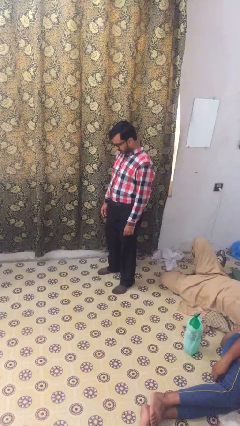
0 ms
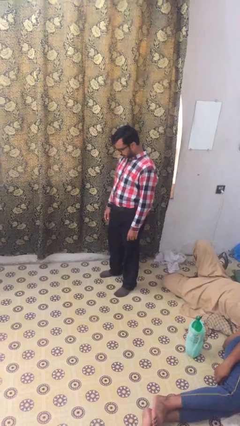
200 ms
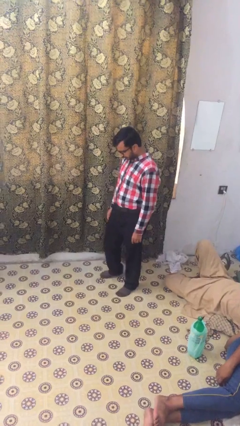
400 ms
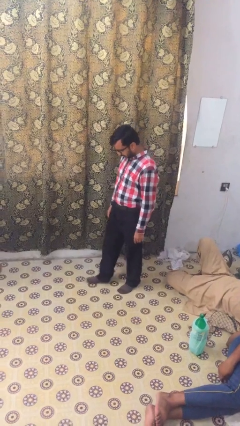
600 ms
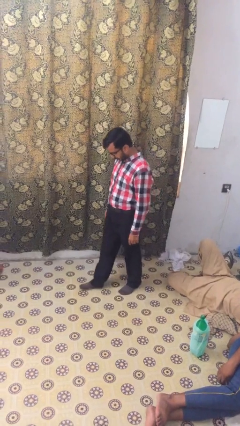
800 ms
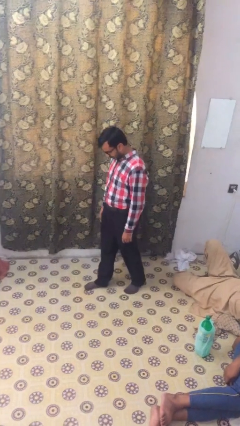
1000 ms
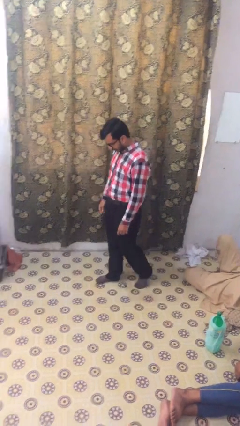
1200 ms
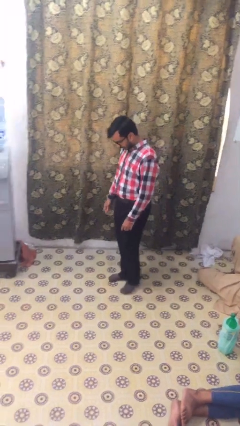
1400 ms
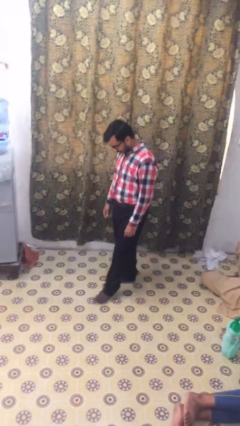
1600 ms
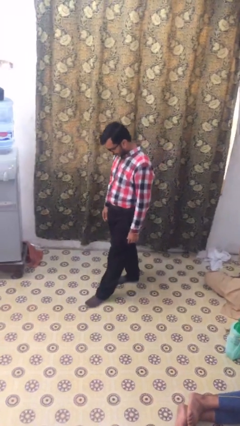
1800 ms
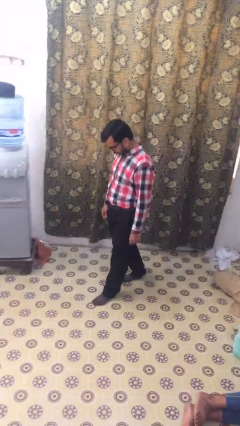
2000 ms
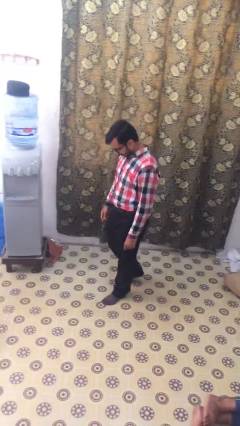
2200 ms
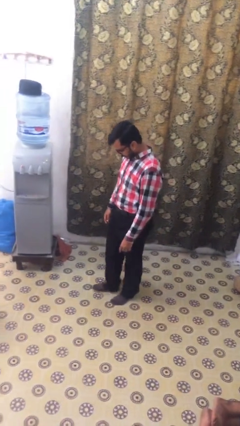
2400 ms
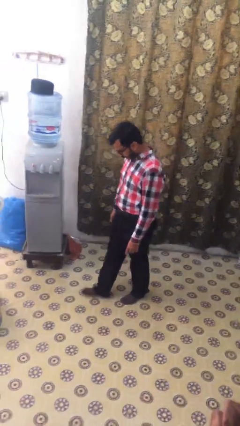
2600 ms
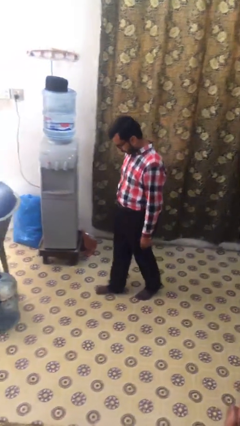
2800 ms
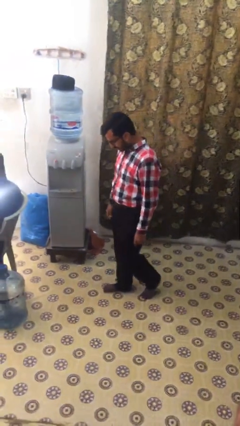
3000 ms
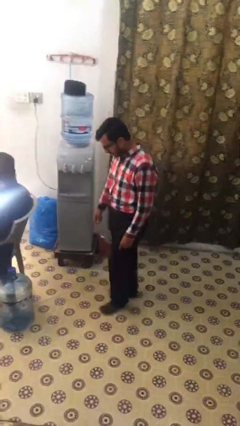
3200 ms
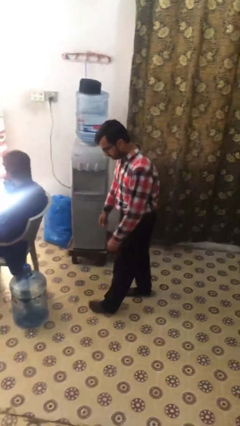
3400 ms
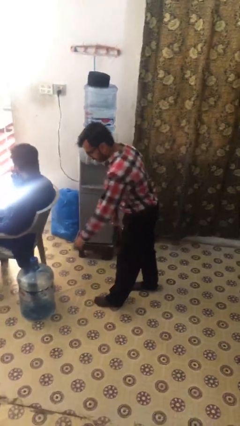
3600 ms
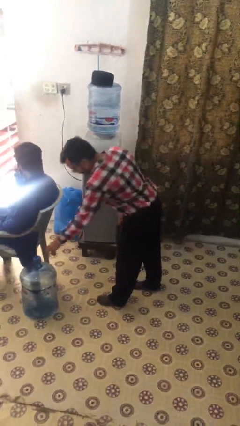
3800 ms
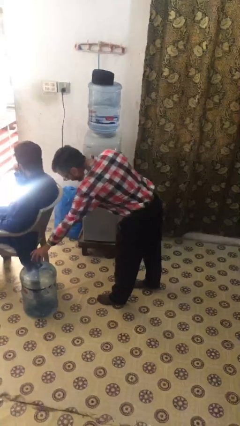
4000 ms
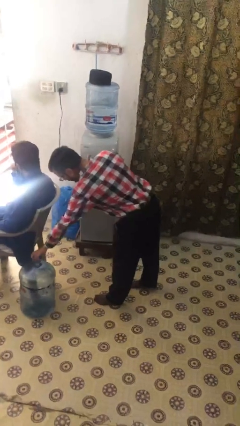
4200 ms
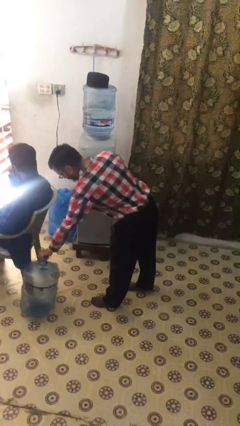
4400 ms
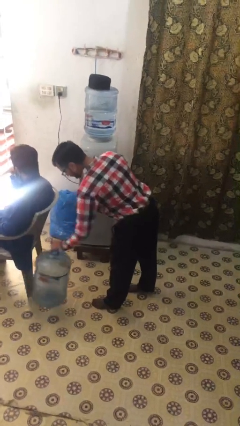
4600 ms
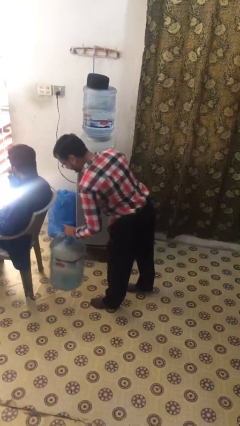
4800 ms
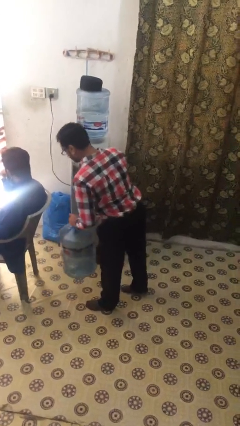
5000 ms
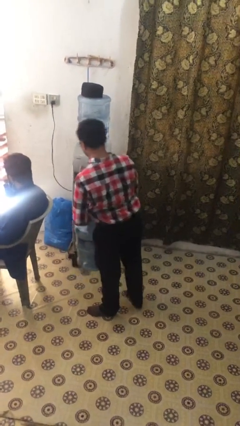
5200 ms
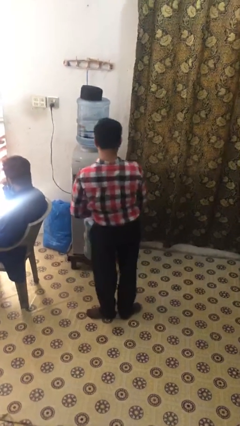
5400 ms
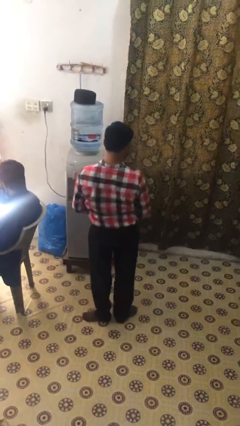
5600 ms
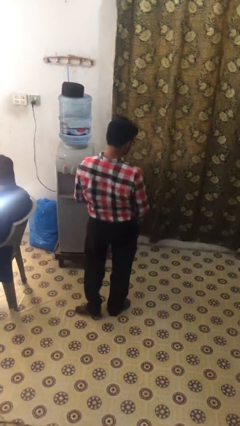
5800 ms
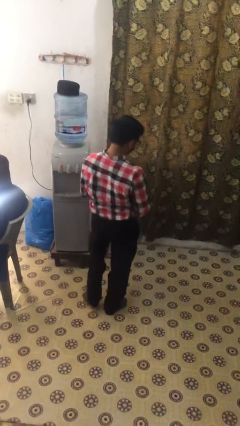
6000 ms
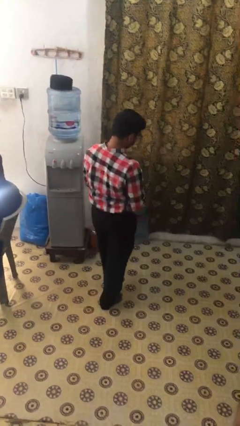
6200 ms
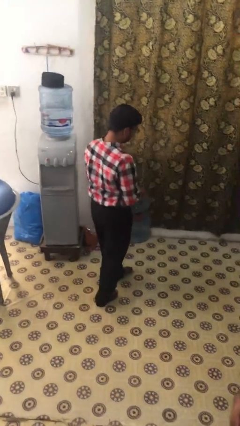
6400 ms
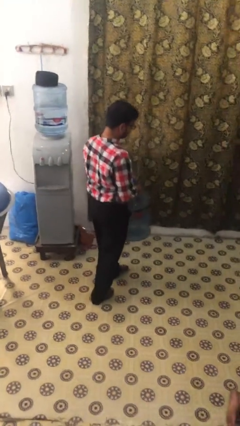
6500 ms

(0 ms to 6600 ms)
person steals object from person

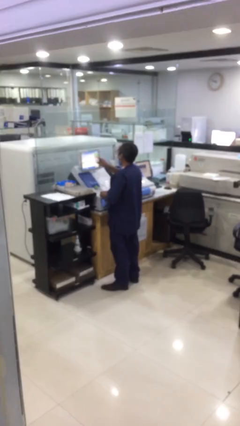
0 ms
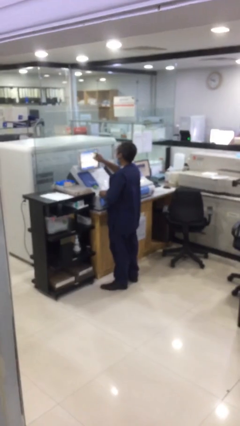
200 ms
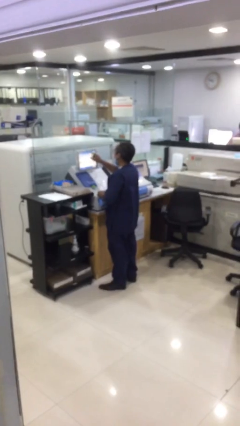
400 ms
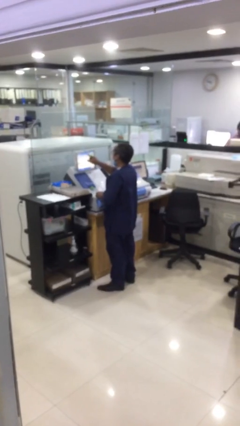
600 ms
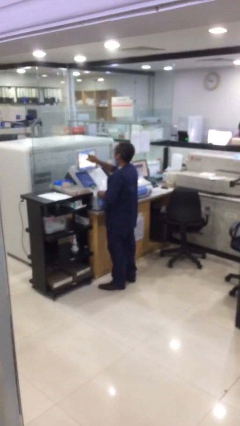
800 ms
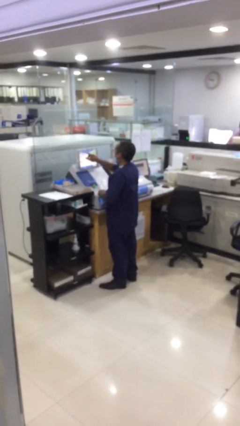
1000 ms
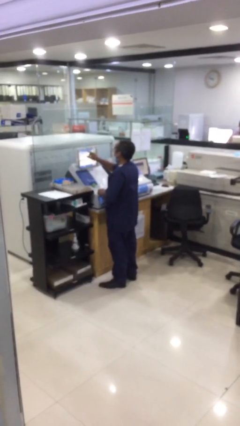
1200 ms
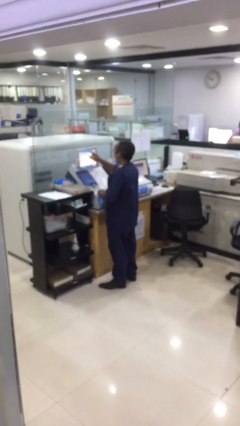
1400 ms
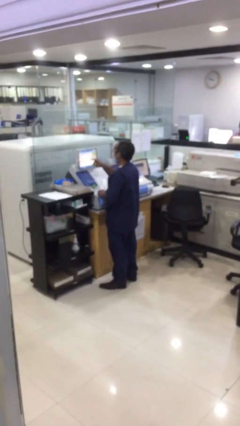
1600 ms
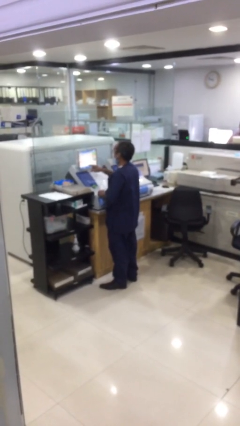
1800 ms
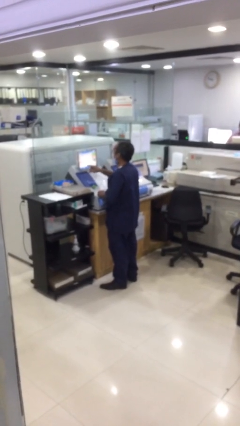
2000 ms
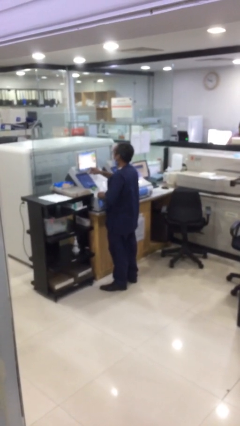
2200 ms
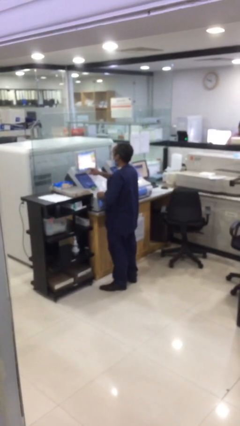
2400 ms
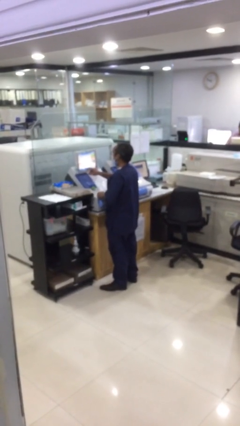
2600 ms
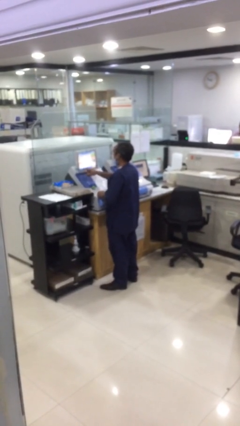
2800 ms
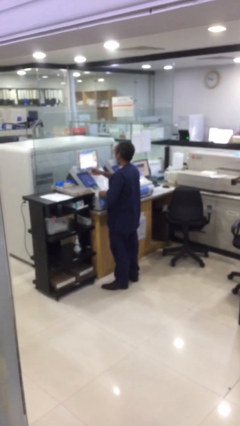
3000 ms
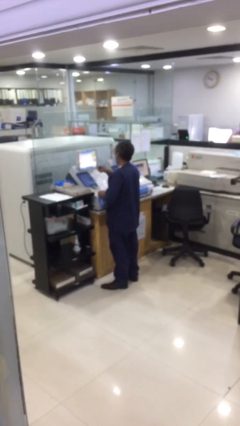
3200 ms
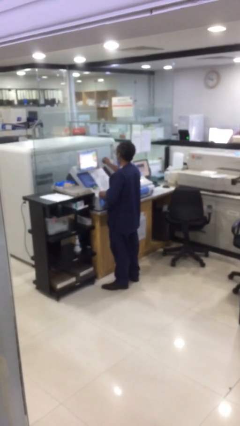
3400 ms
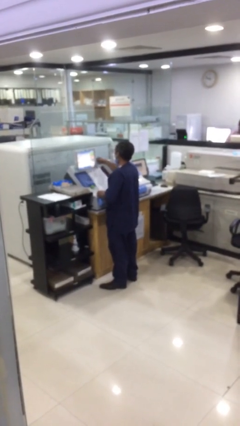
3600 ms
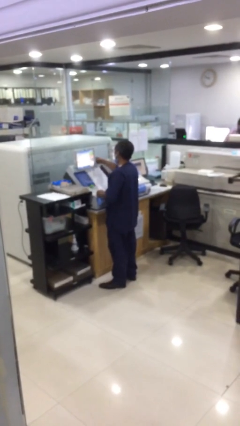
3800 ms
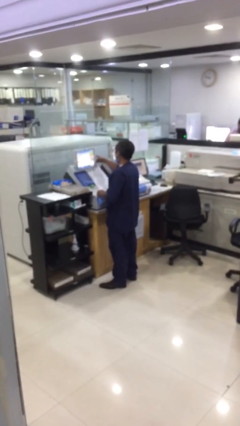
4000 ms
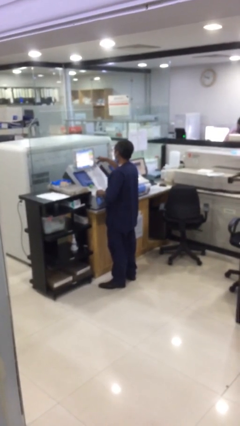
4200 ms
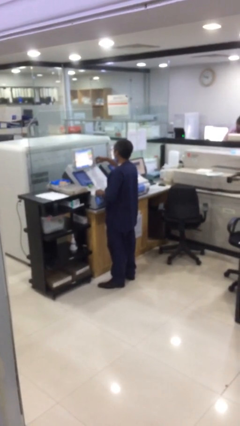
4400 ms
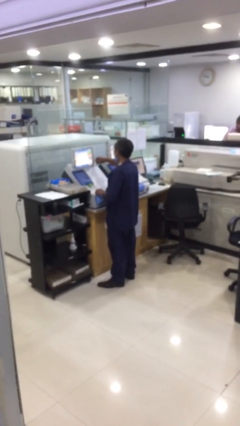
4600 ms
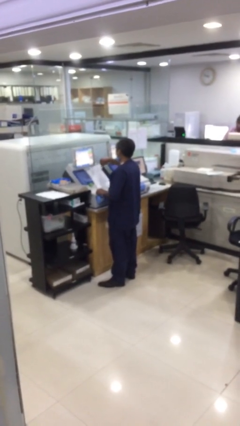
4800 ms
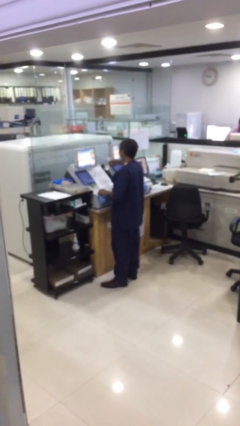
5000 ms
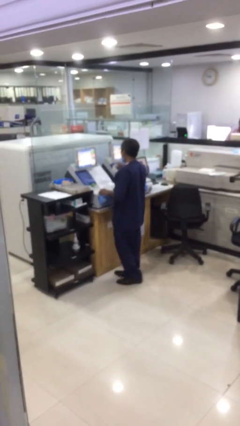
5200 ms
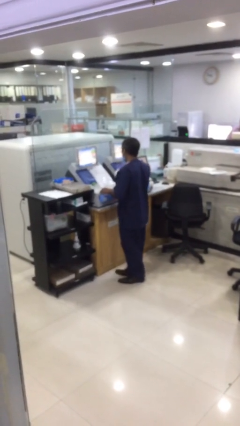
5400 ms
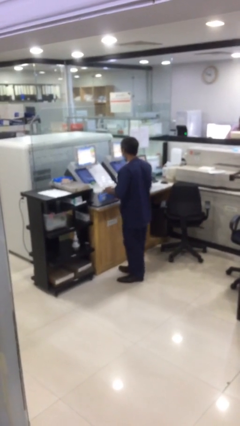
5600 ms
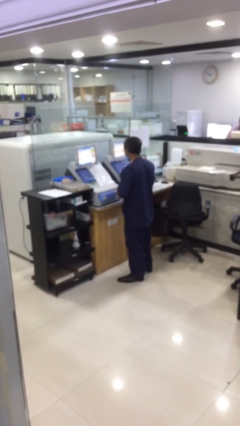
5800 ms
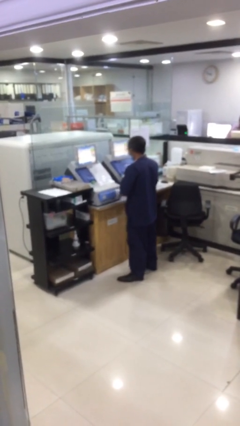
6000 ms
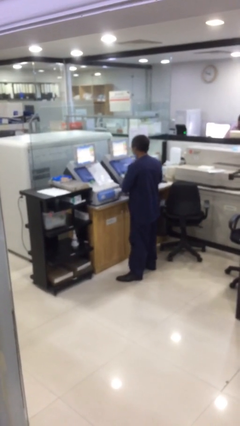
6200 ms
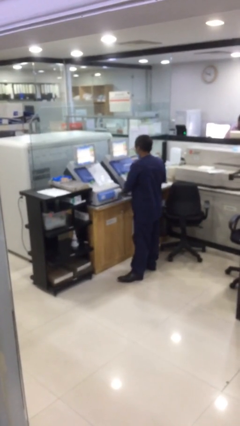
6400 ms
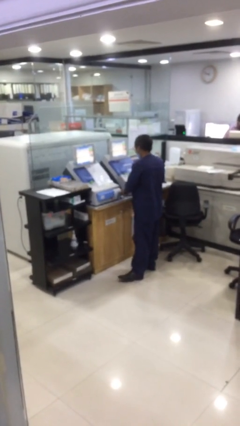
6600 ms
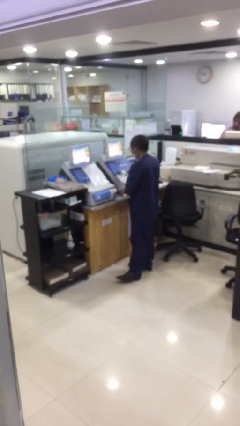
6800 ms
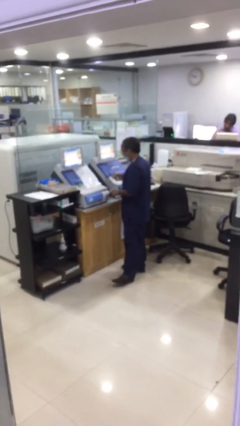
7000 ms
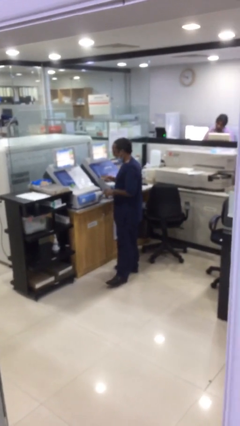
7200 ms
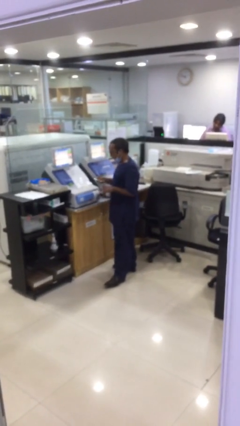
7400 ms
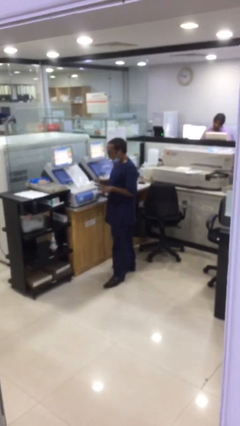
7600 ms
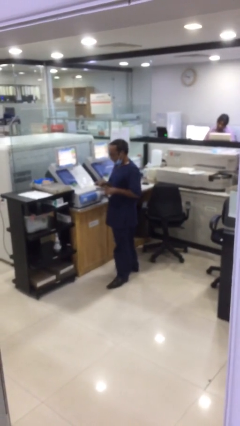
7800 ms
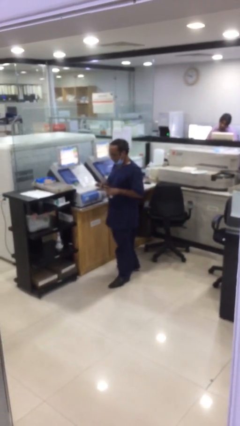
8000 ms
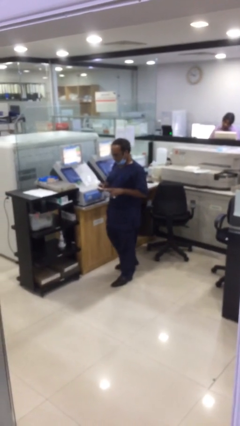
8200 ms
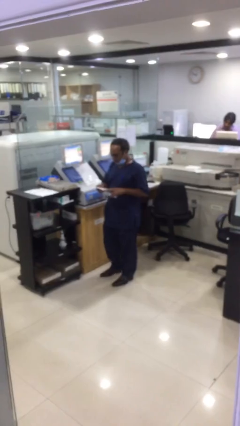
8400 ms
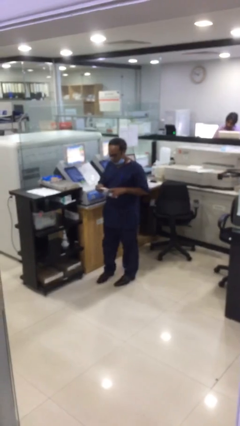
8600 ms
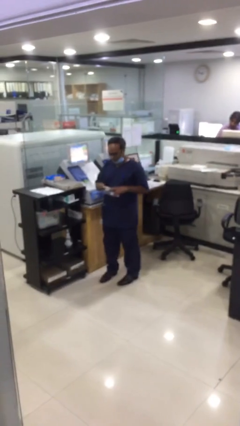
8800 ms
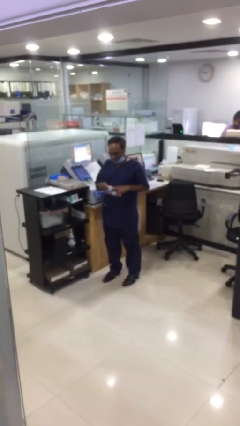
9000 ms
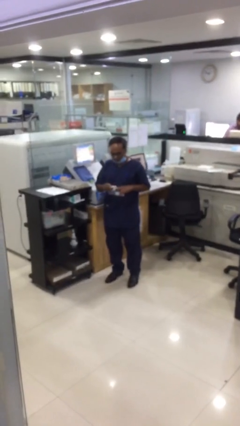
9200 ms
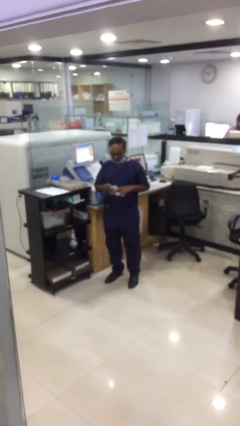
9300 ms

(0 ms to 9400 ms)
person purchases from machine

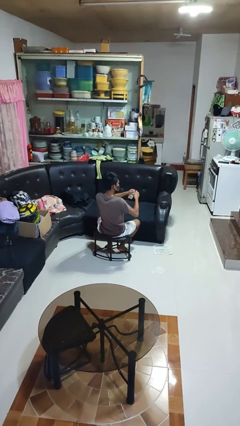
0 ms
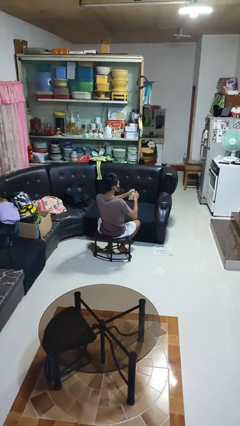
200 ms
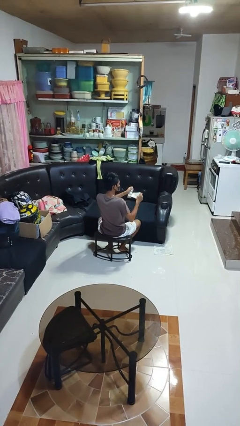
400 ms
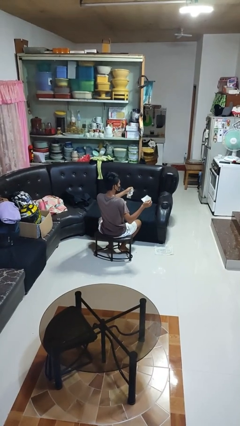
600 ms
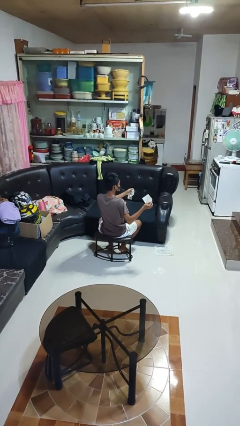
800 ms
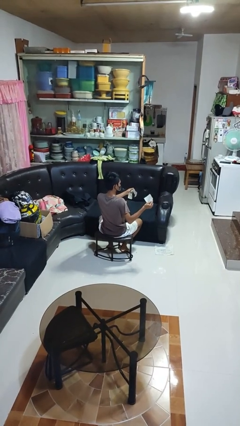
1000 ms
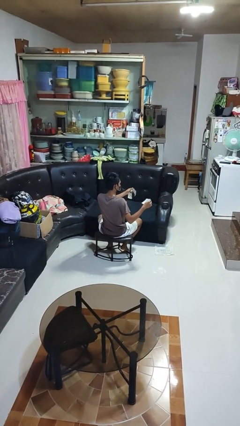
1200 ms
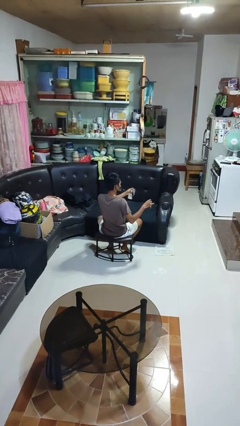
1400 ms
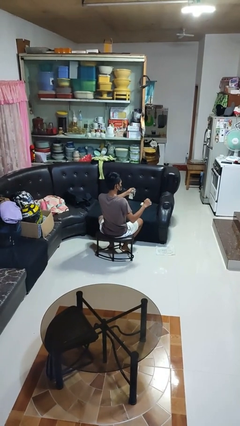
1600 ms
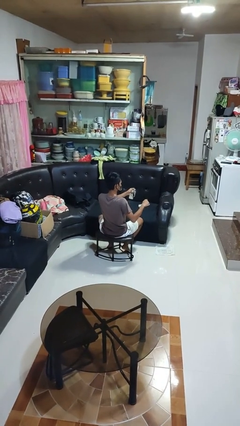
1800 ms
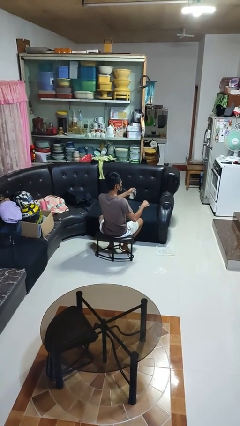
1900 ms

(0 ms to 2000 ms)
person tears paper
